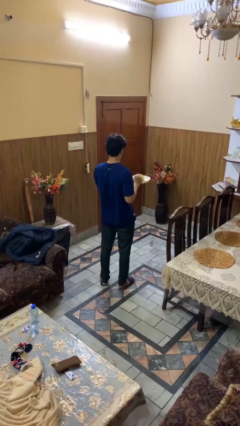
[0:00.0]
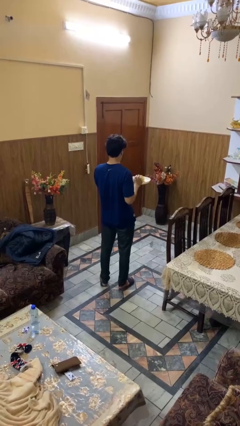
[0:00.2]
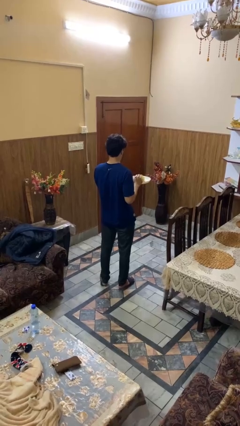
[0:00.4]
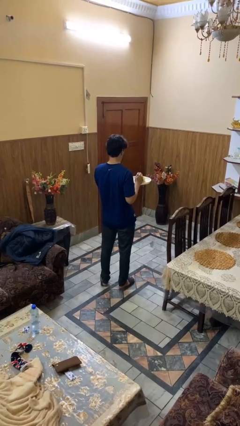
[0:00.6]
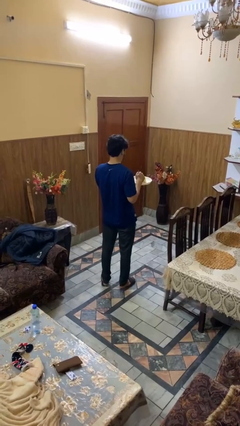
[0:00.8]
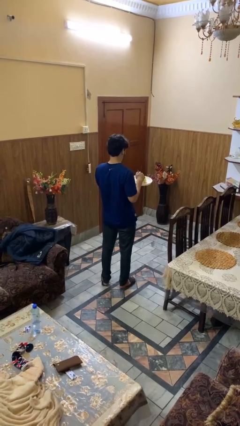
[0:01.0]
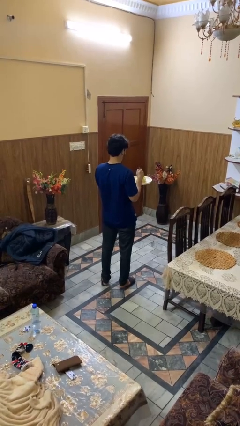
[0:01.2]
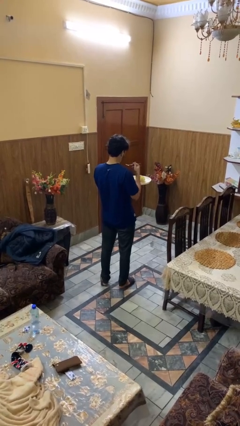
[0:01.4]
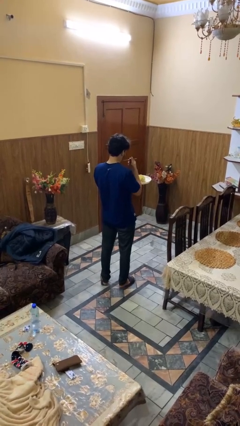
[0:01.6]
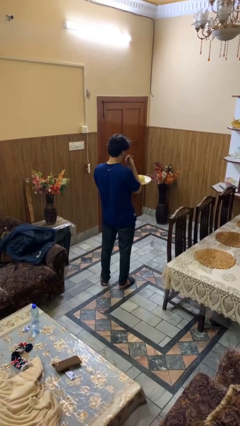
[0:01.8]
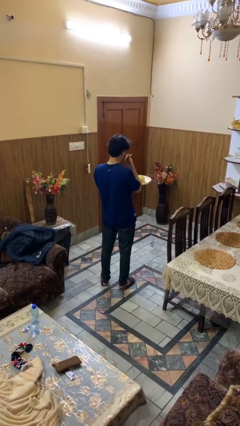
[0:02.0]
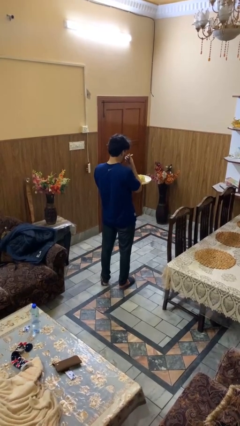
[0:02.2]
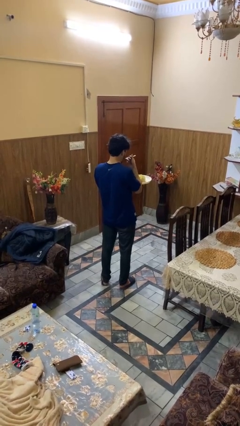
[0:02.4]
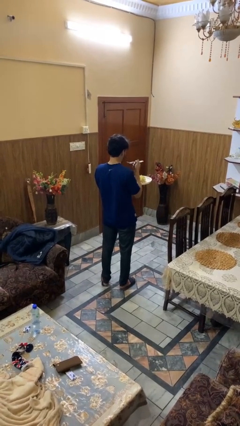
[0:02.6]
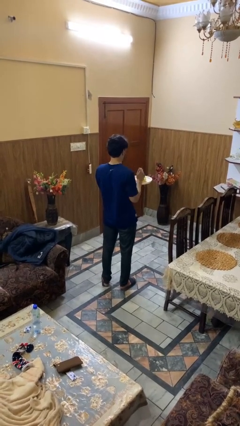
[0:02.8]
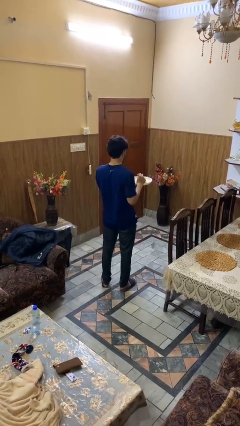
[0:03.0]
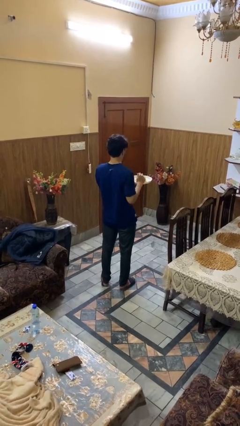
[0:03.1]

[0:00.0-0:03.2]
person eats with utensil

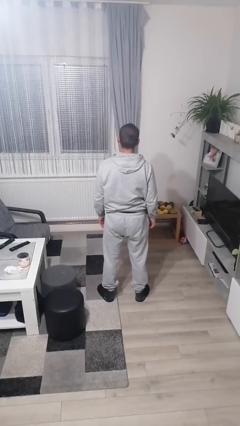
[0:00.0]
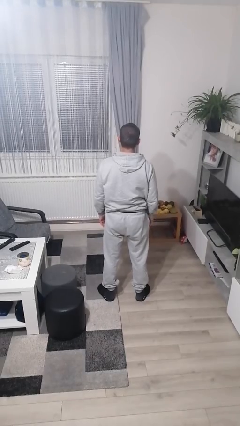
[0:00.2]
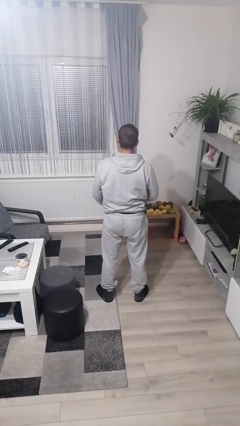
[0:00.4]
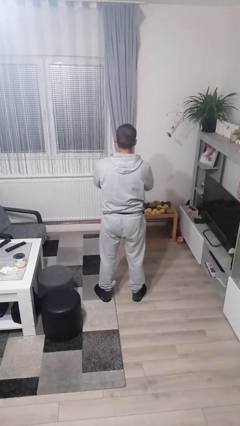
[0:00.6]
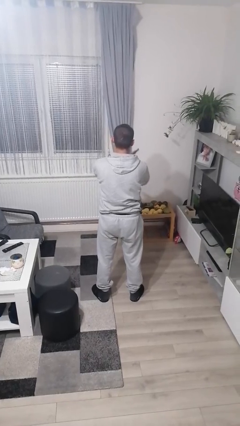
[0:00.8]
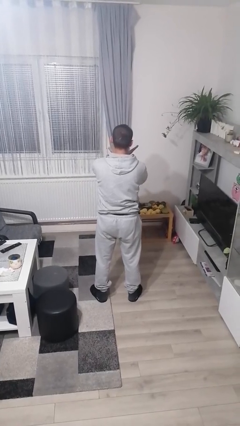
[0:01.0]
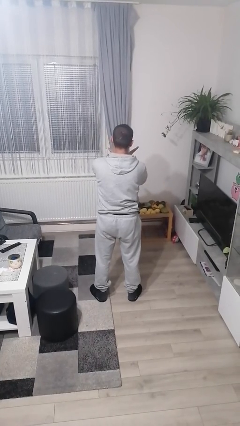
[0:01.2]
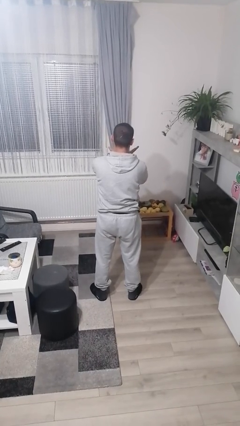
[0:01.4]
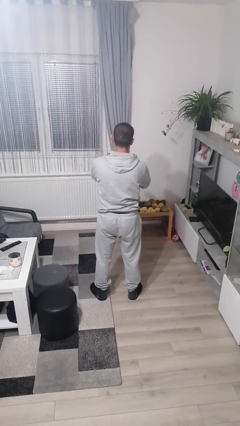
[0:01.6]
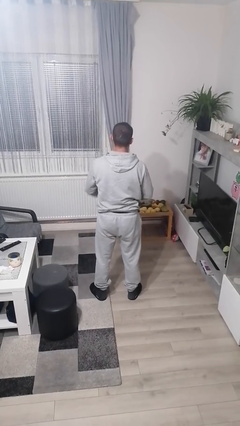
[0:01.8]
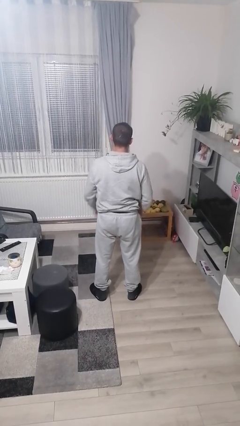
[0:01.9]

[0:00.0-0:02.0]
person gestures arms x

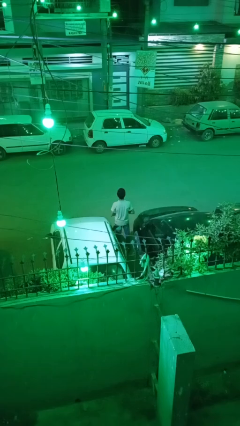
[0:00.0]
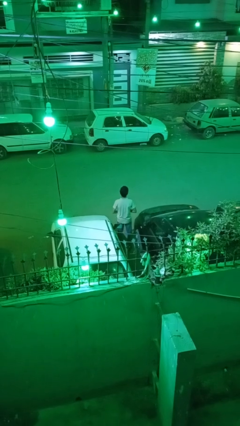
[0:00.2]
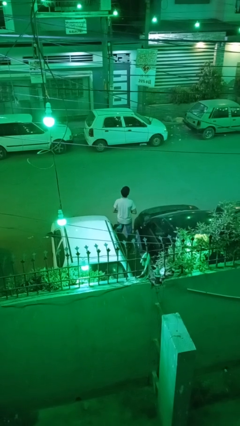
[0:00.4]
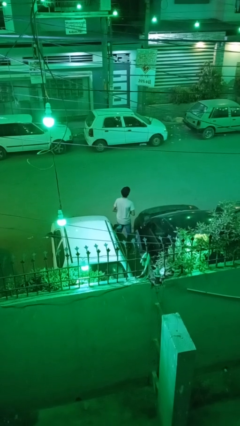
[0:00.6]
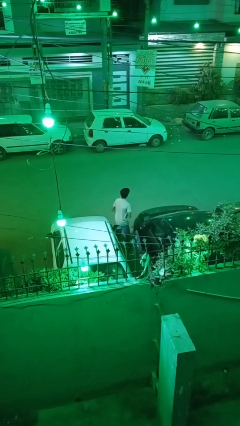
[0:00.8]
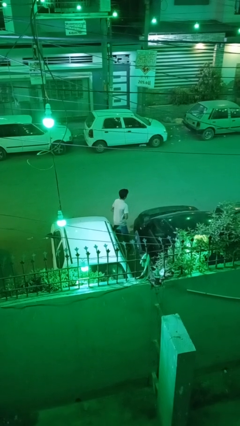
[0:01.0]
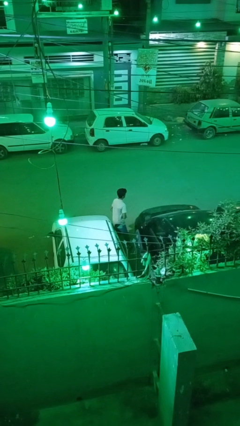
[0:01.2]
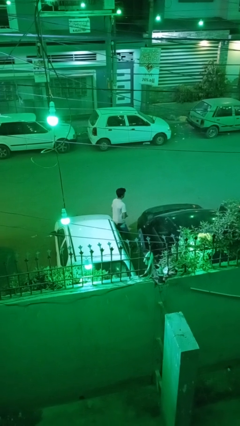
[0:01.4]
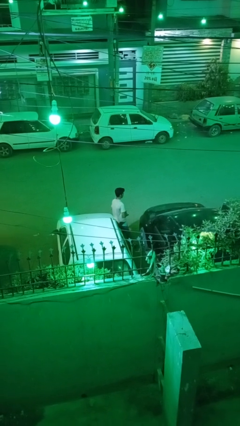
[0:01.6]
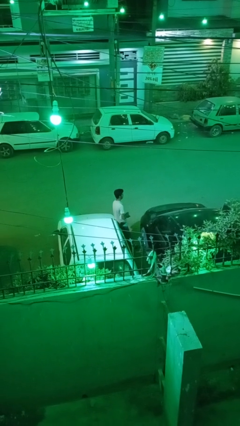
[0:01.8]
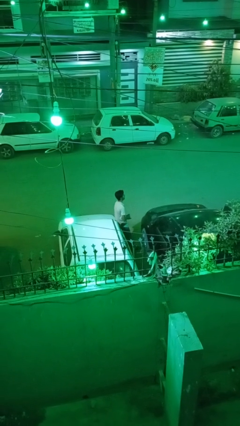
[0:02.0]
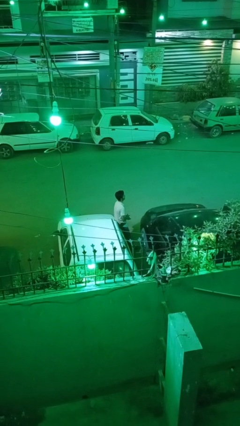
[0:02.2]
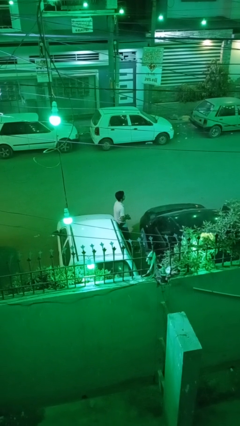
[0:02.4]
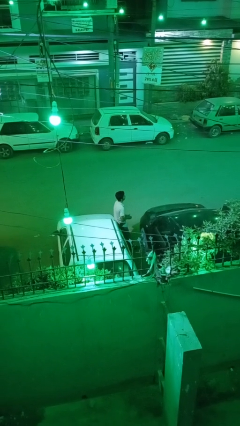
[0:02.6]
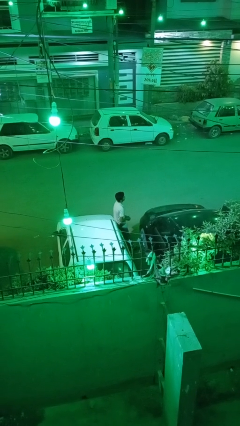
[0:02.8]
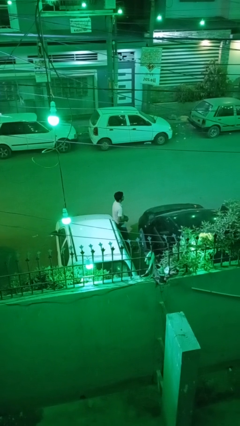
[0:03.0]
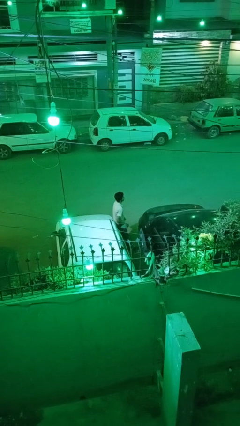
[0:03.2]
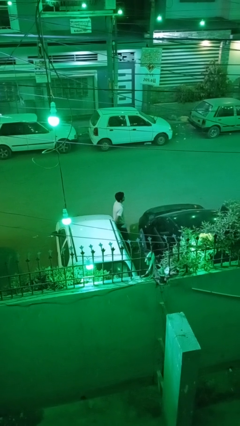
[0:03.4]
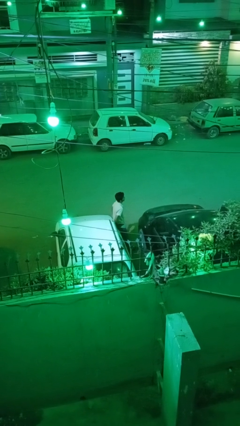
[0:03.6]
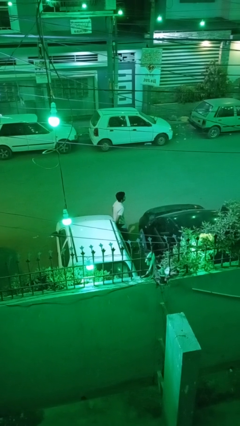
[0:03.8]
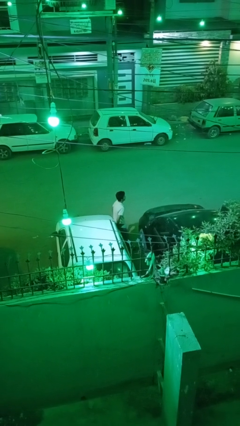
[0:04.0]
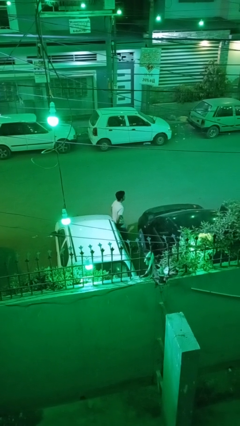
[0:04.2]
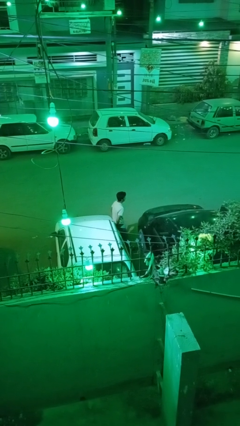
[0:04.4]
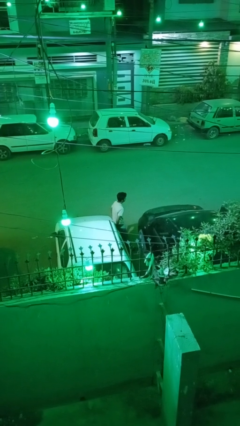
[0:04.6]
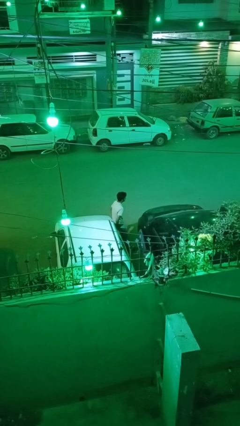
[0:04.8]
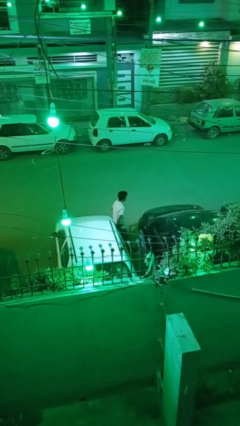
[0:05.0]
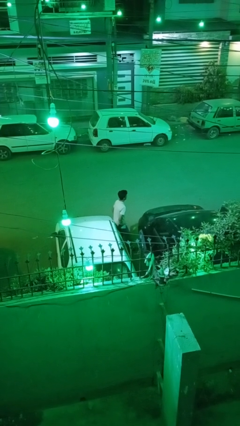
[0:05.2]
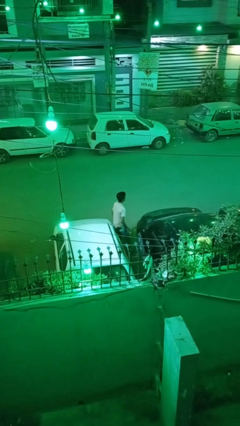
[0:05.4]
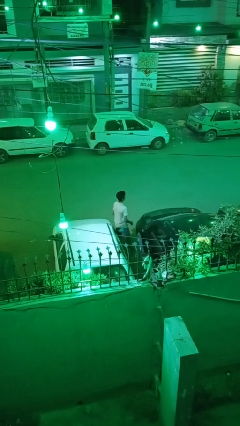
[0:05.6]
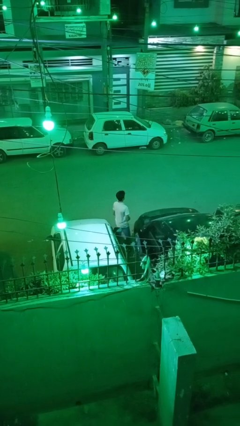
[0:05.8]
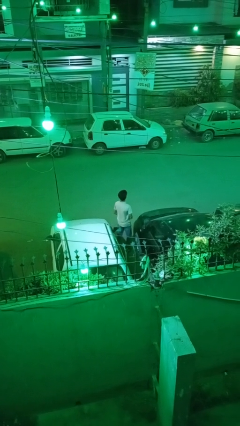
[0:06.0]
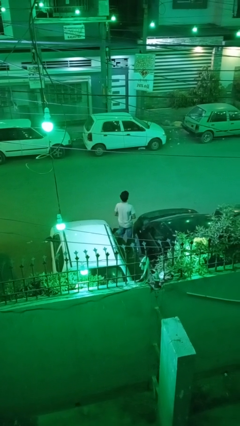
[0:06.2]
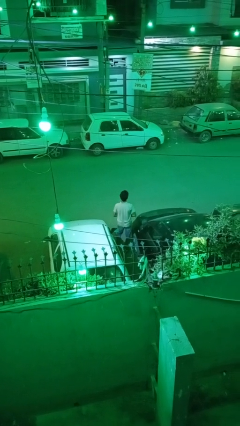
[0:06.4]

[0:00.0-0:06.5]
person leans against car

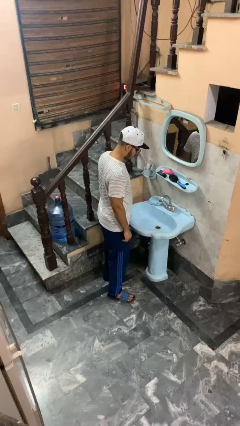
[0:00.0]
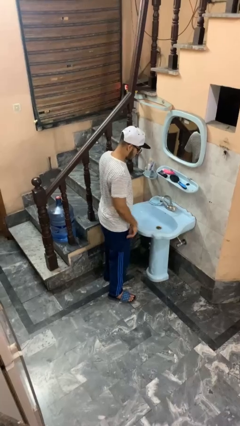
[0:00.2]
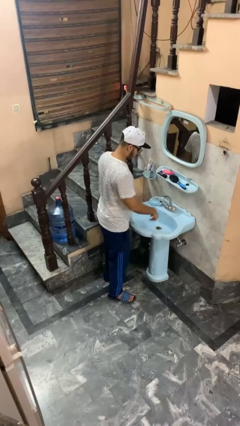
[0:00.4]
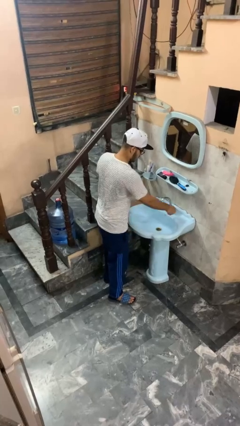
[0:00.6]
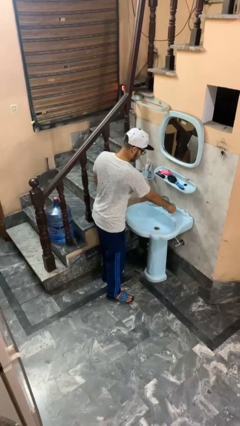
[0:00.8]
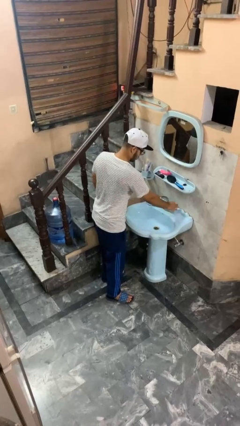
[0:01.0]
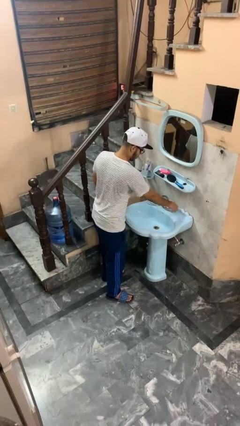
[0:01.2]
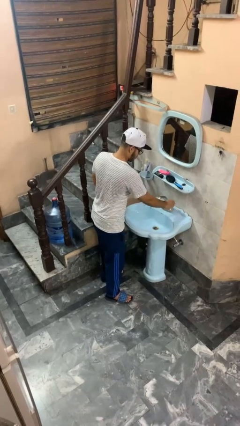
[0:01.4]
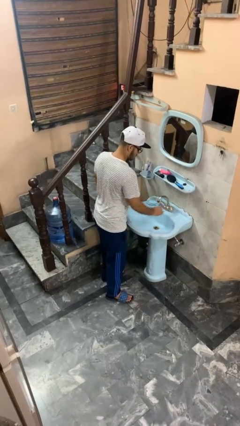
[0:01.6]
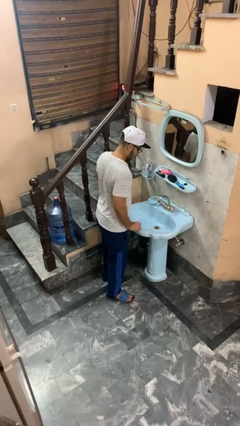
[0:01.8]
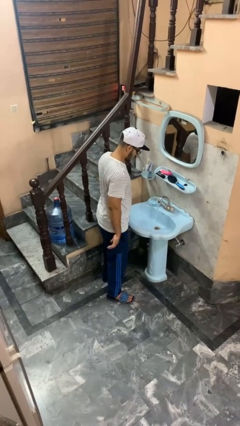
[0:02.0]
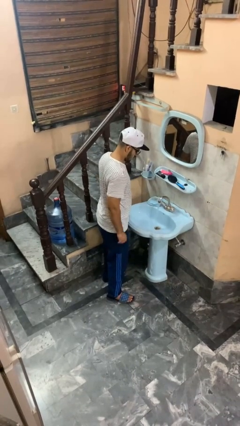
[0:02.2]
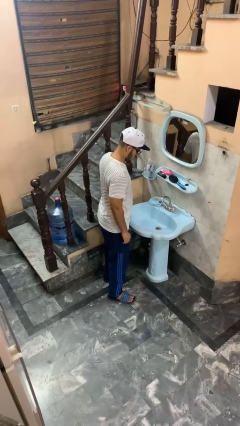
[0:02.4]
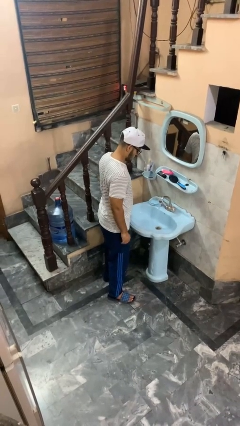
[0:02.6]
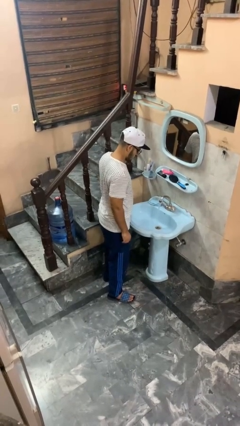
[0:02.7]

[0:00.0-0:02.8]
person turns on faucet

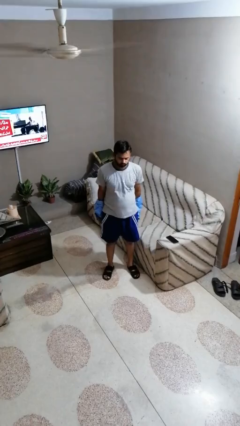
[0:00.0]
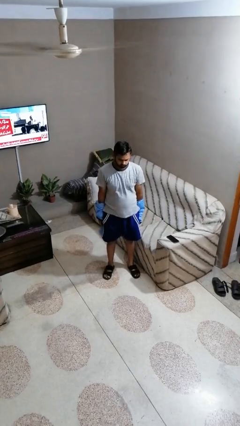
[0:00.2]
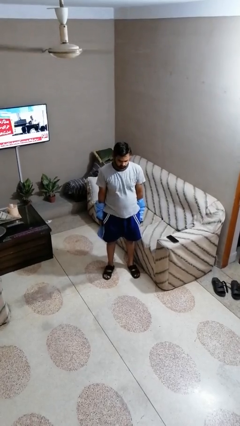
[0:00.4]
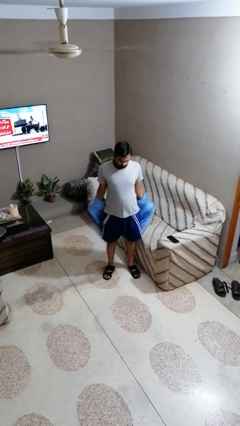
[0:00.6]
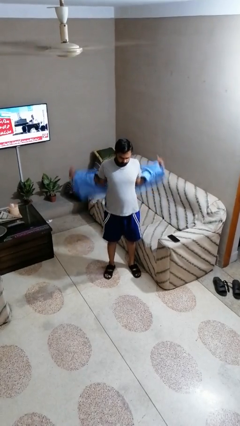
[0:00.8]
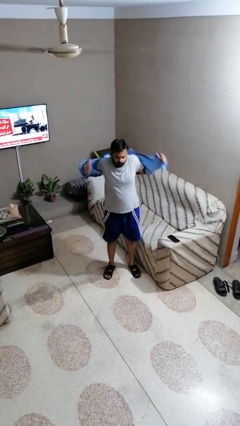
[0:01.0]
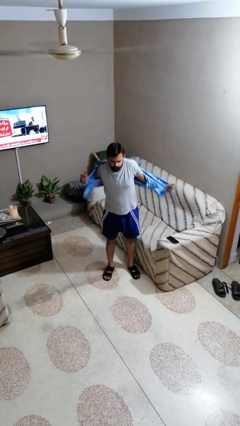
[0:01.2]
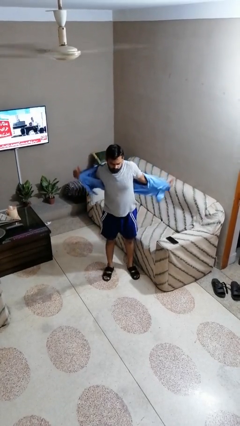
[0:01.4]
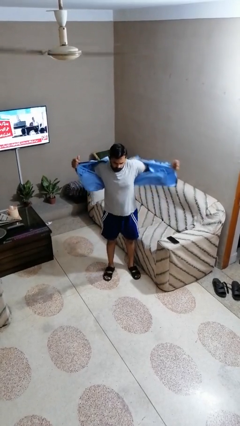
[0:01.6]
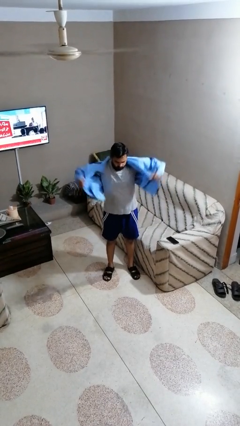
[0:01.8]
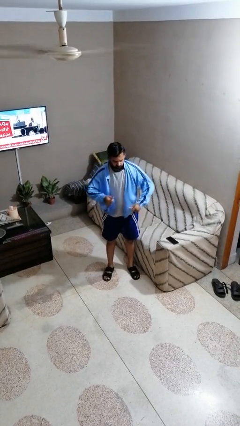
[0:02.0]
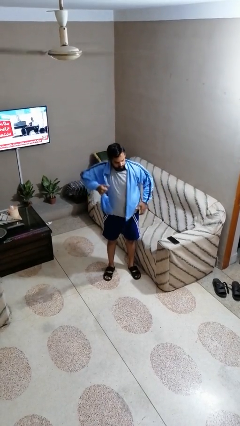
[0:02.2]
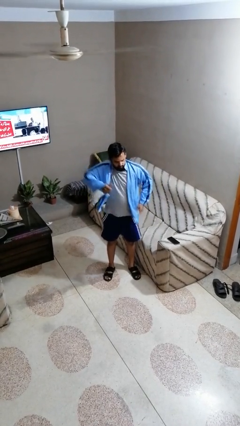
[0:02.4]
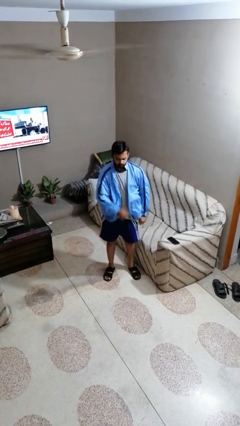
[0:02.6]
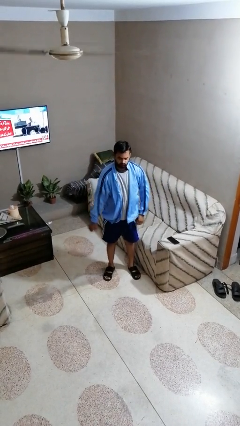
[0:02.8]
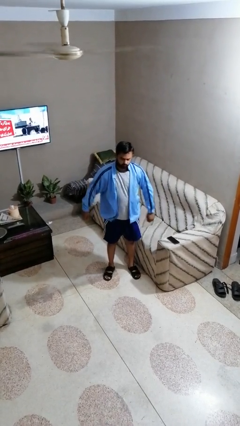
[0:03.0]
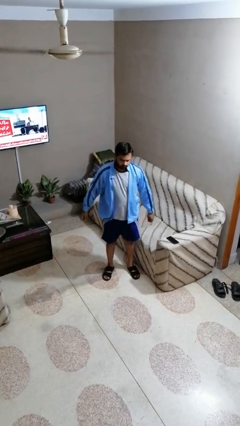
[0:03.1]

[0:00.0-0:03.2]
person puts on jacket

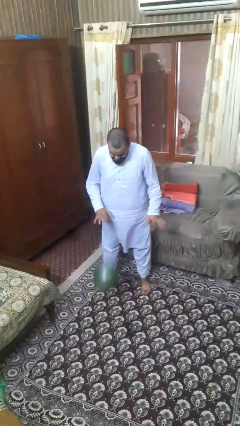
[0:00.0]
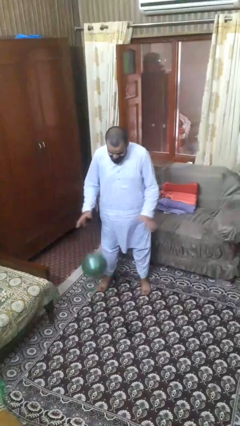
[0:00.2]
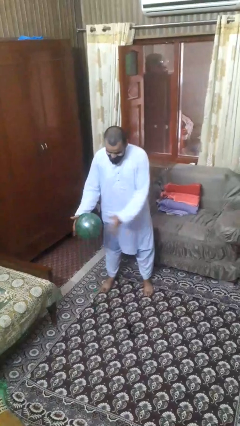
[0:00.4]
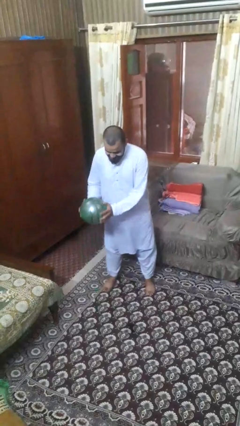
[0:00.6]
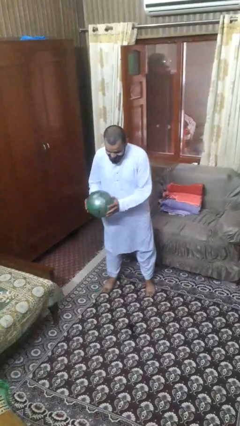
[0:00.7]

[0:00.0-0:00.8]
person bounces ball on floor
